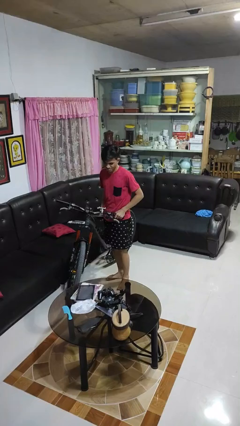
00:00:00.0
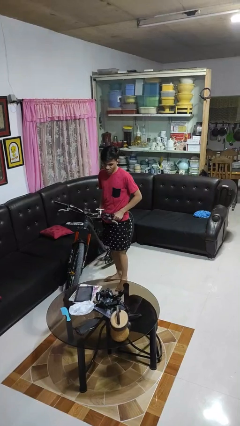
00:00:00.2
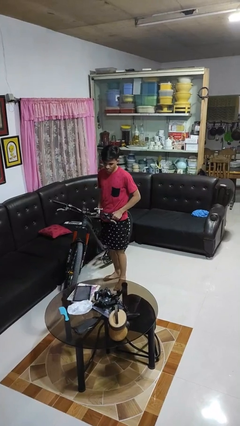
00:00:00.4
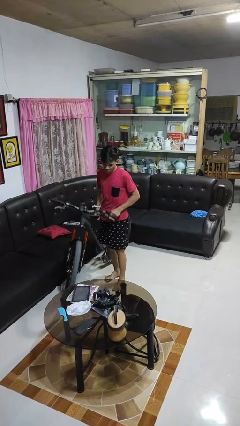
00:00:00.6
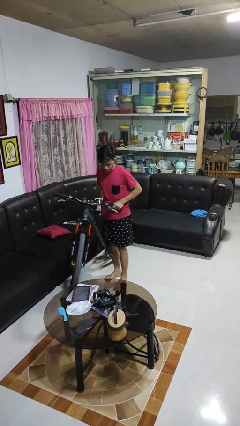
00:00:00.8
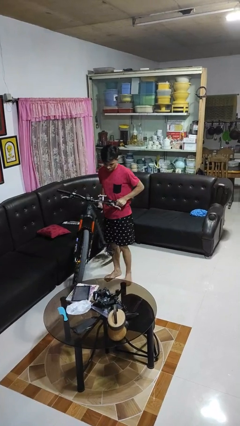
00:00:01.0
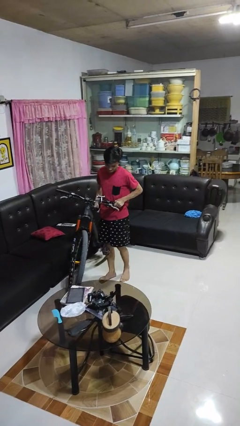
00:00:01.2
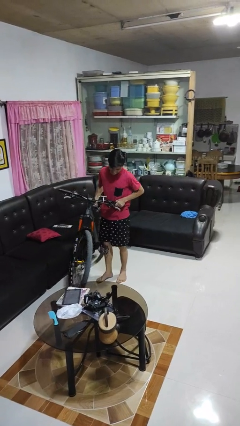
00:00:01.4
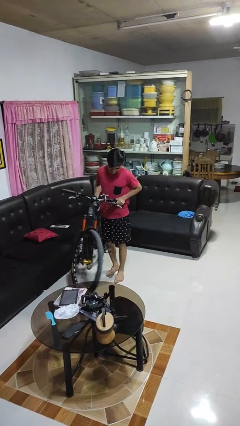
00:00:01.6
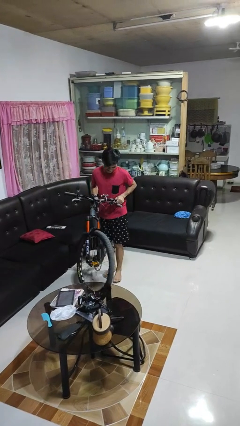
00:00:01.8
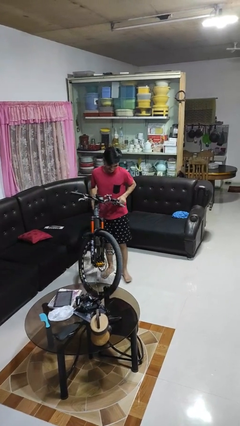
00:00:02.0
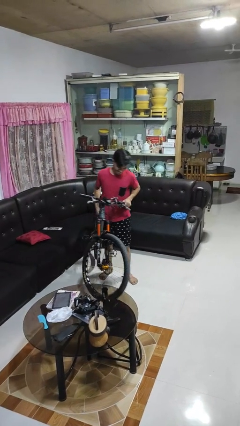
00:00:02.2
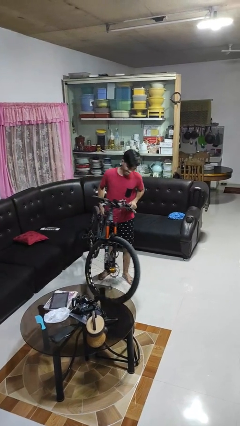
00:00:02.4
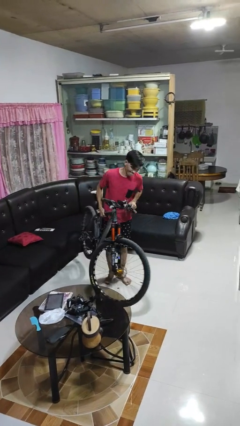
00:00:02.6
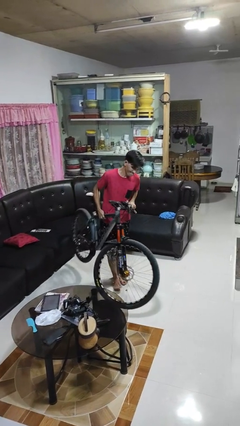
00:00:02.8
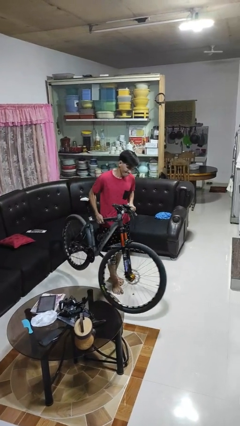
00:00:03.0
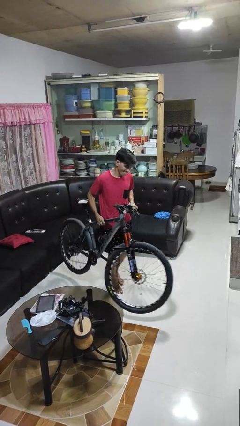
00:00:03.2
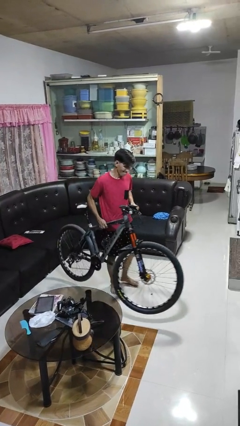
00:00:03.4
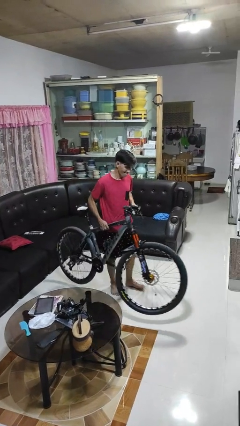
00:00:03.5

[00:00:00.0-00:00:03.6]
person carries bicycle

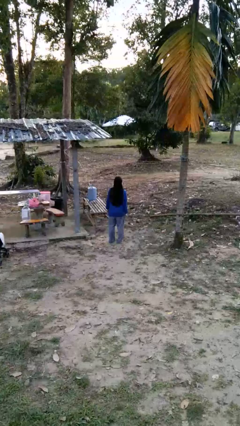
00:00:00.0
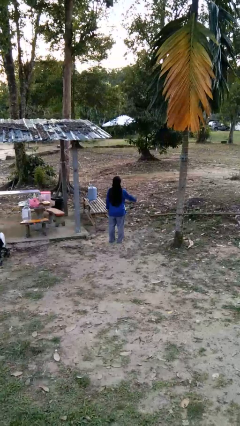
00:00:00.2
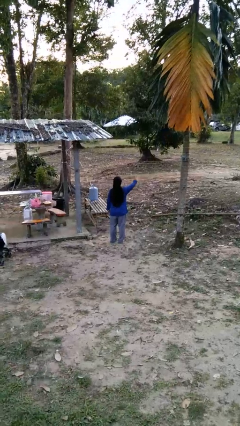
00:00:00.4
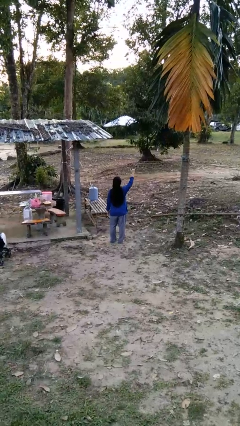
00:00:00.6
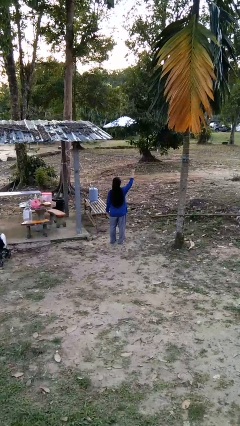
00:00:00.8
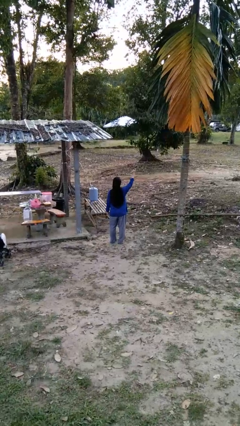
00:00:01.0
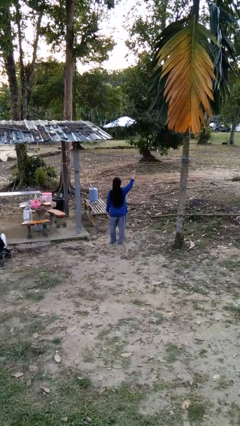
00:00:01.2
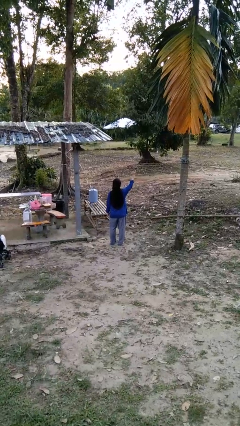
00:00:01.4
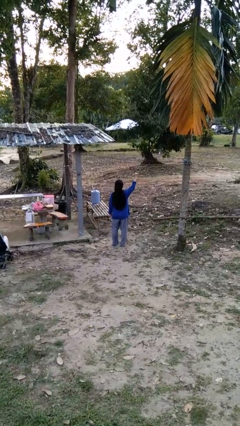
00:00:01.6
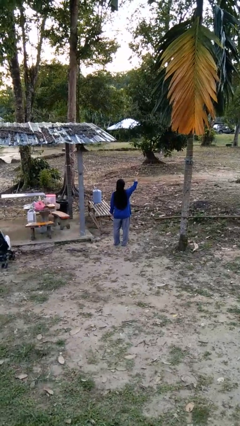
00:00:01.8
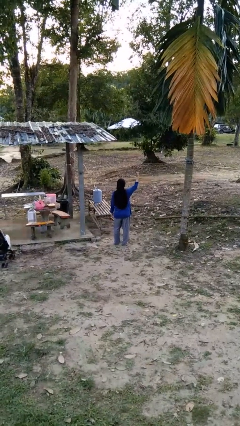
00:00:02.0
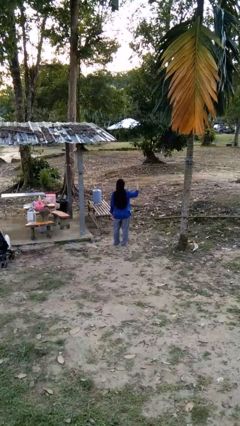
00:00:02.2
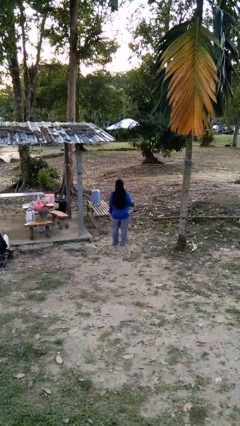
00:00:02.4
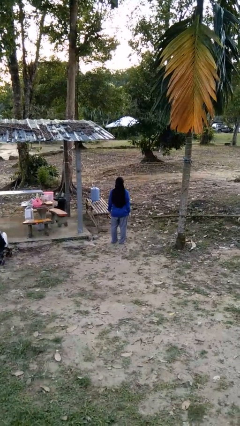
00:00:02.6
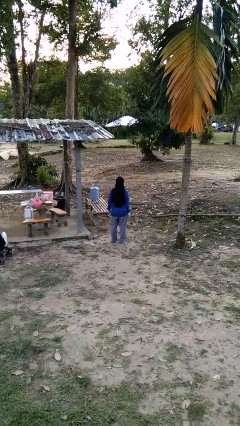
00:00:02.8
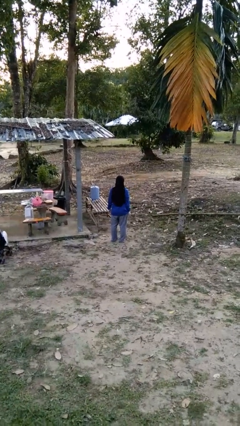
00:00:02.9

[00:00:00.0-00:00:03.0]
person gestures hang loose

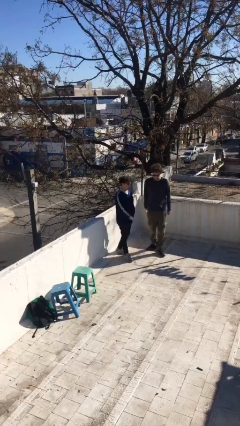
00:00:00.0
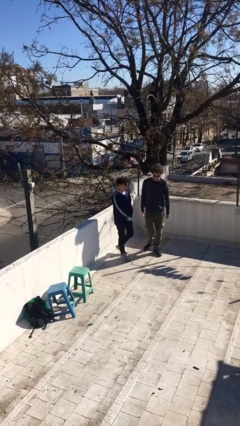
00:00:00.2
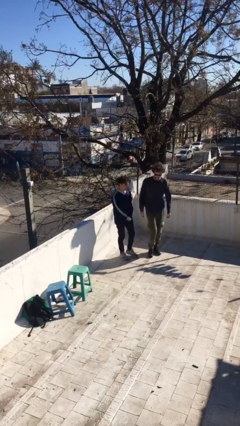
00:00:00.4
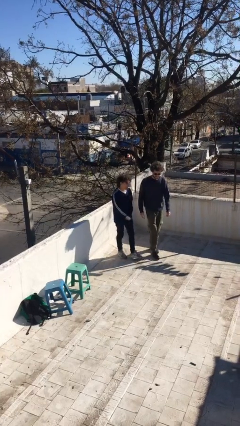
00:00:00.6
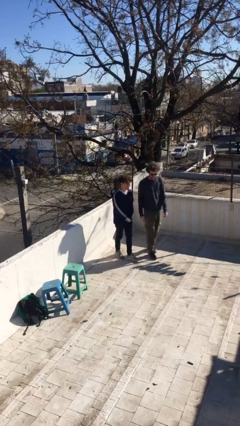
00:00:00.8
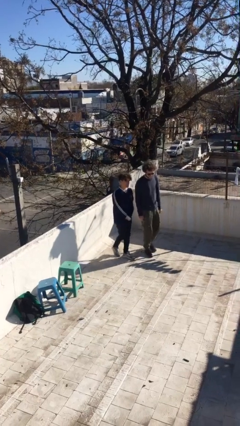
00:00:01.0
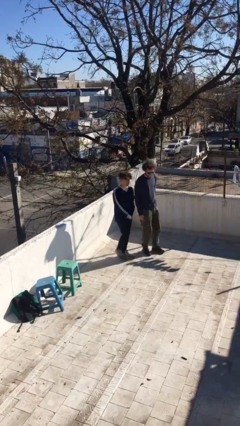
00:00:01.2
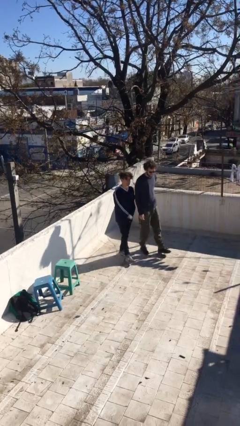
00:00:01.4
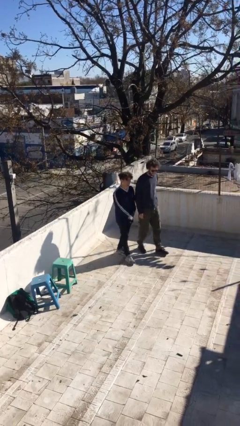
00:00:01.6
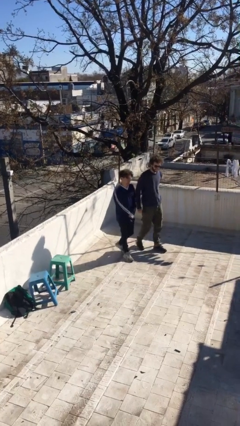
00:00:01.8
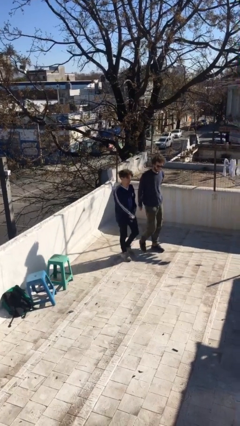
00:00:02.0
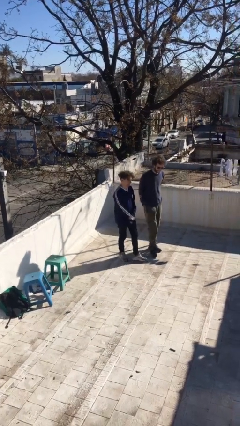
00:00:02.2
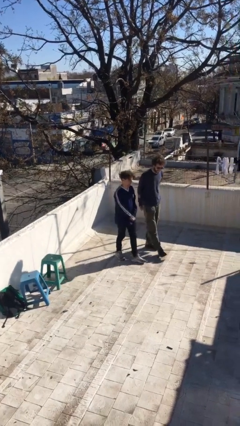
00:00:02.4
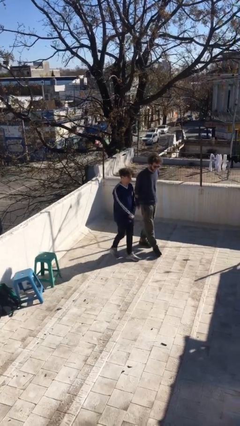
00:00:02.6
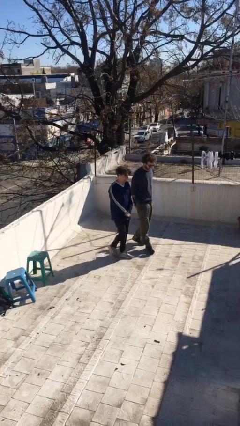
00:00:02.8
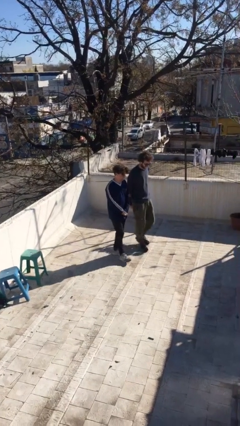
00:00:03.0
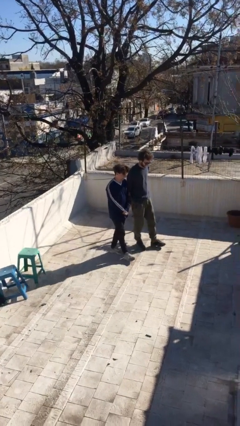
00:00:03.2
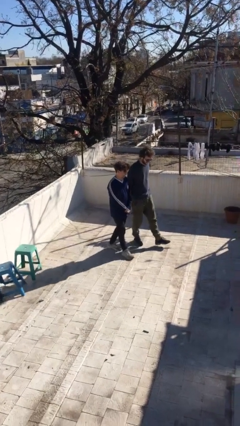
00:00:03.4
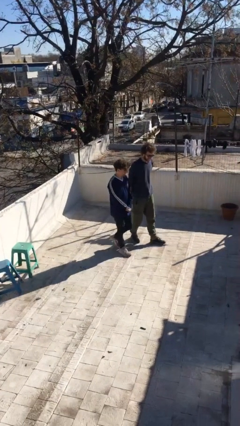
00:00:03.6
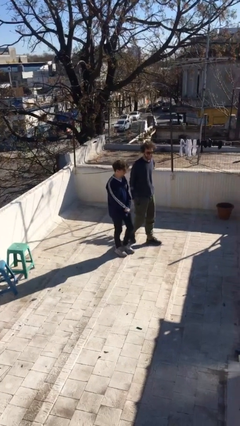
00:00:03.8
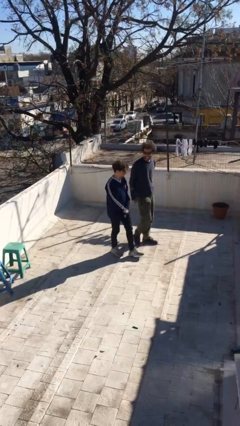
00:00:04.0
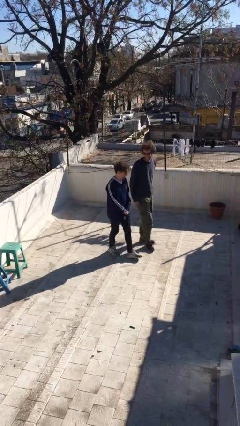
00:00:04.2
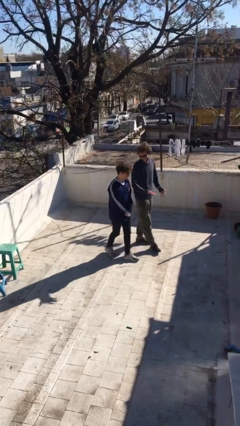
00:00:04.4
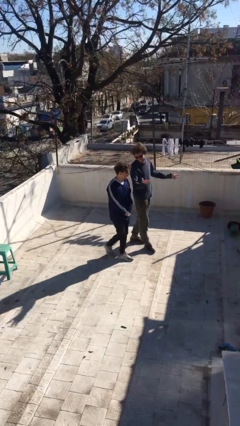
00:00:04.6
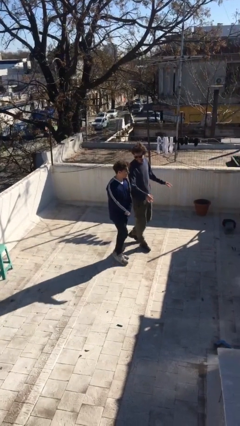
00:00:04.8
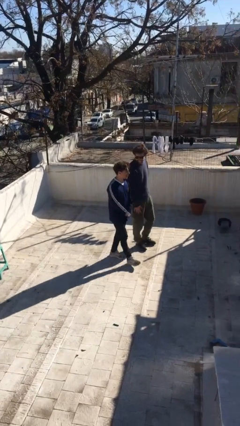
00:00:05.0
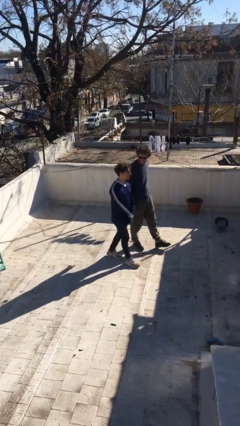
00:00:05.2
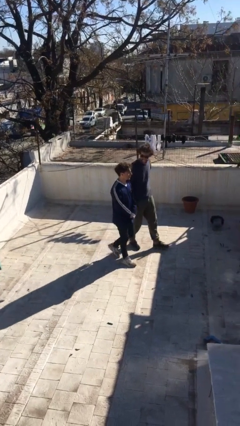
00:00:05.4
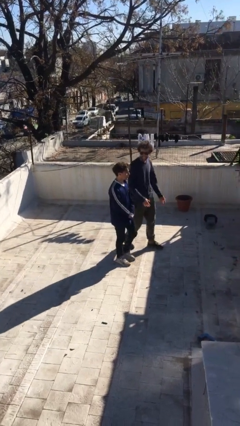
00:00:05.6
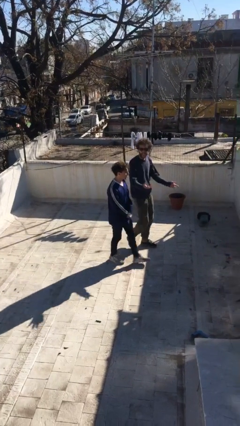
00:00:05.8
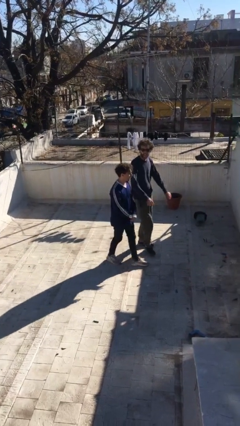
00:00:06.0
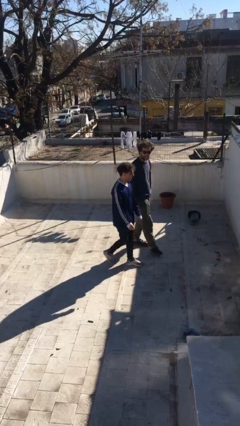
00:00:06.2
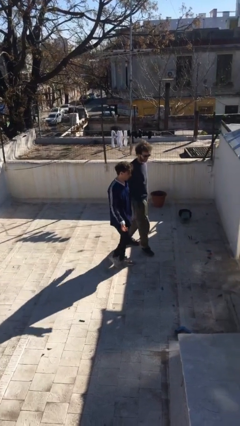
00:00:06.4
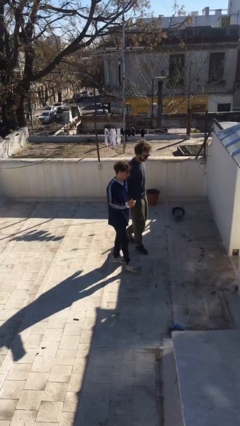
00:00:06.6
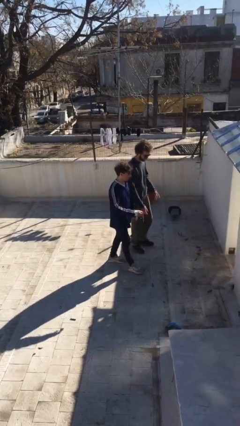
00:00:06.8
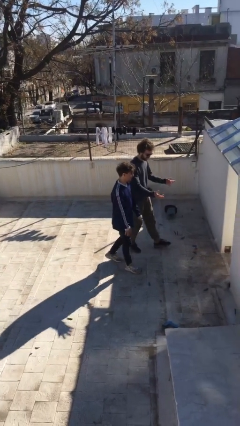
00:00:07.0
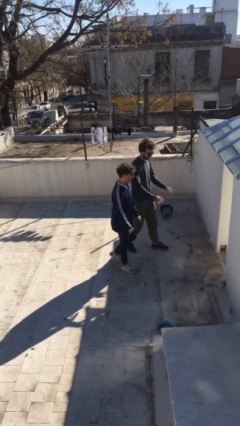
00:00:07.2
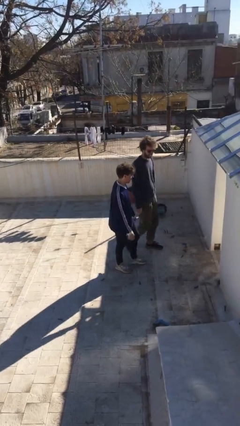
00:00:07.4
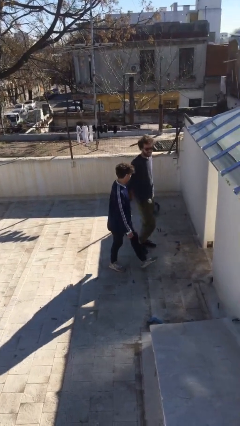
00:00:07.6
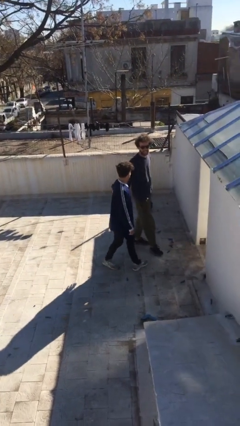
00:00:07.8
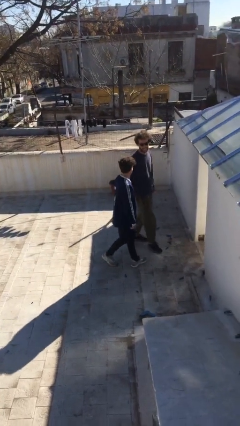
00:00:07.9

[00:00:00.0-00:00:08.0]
person talks to person

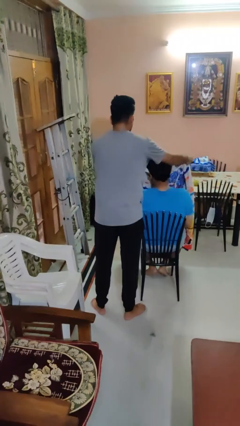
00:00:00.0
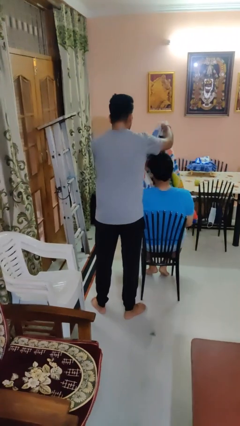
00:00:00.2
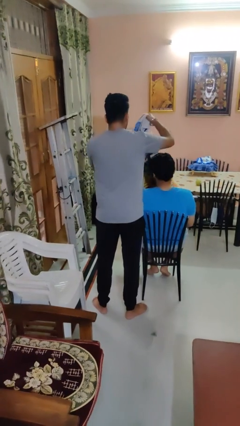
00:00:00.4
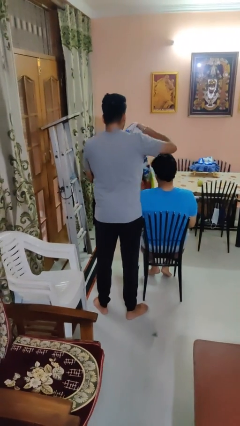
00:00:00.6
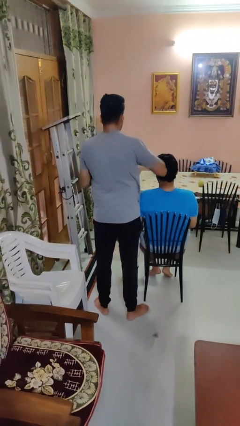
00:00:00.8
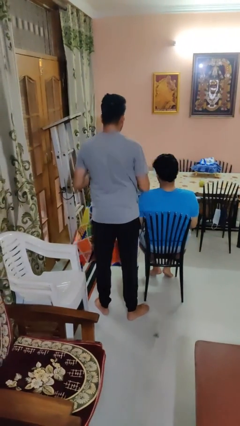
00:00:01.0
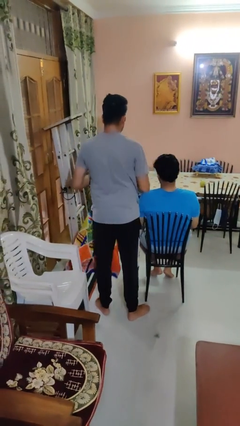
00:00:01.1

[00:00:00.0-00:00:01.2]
person uncovers friend with blanket

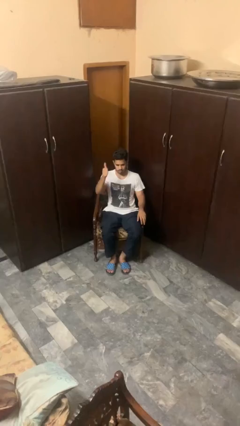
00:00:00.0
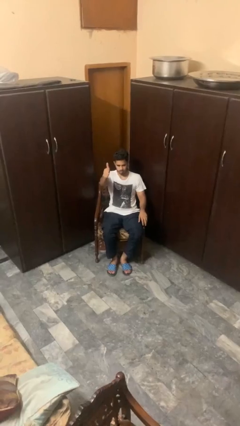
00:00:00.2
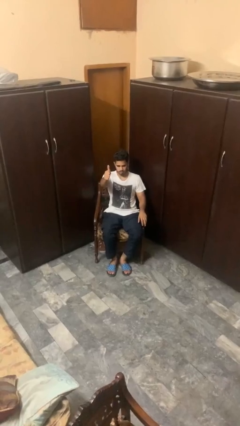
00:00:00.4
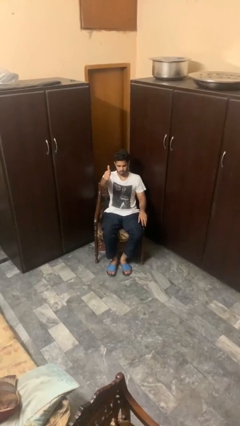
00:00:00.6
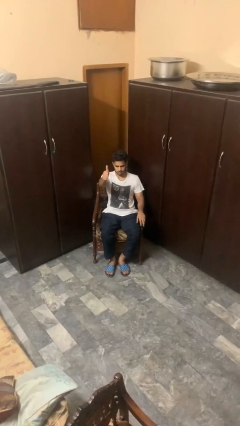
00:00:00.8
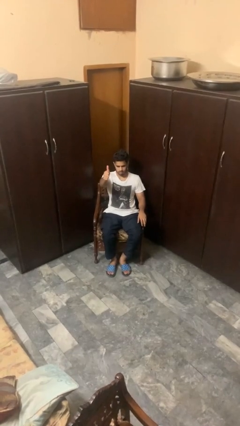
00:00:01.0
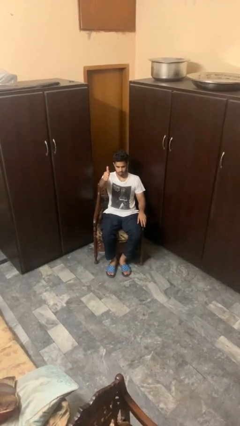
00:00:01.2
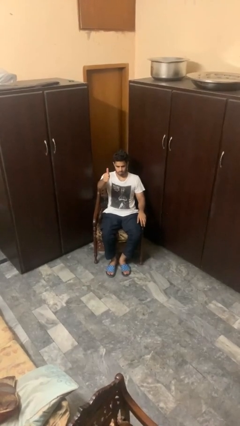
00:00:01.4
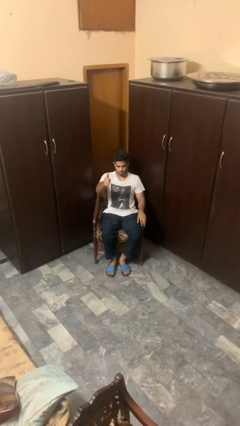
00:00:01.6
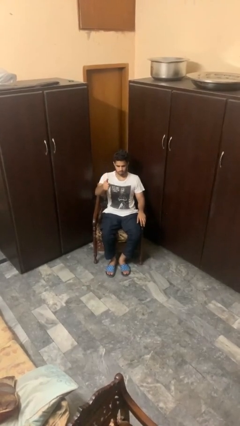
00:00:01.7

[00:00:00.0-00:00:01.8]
person gestures thumbs up
